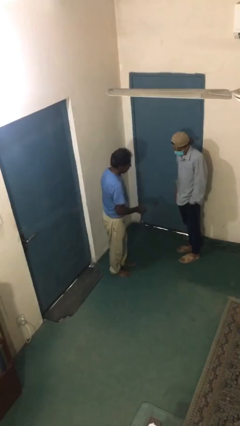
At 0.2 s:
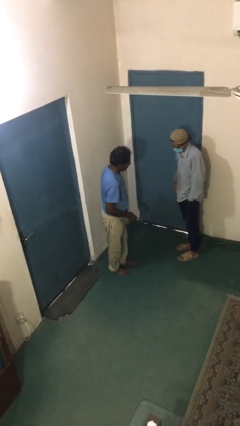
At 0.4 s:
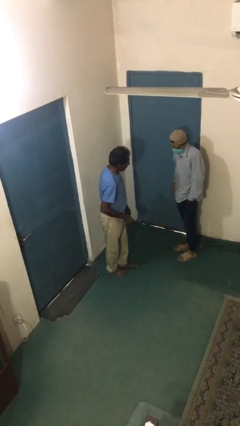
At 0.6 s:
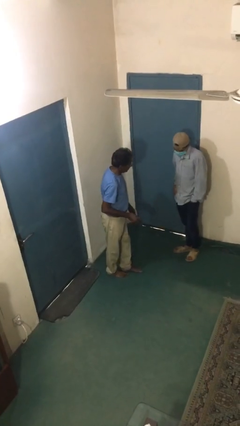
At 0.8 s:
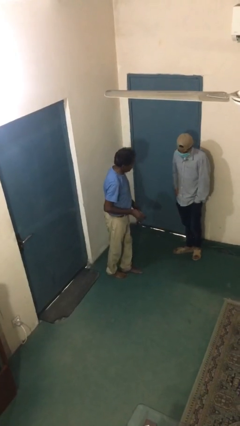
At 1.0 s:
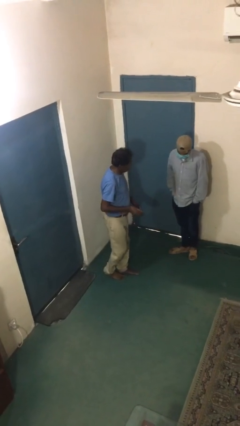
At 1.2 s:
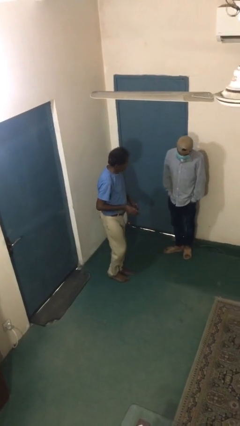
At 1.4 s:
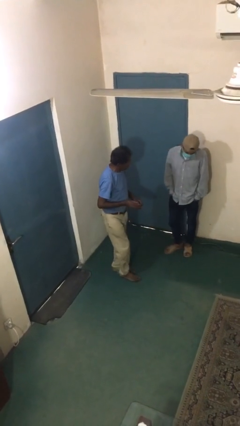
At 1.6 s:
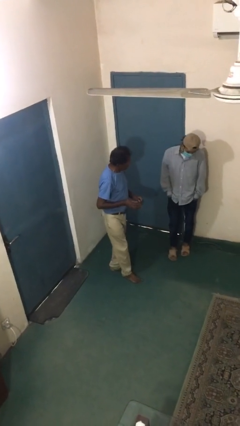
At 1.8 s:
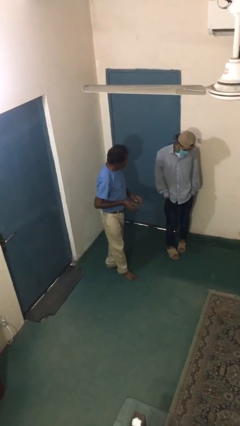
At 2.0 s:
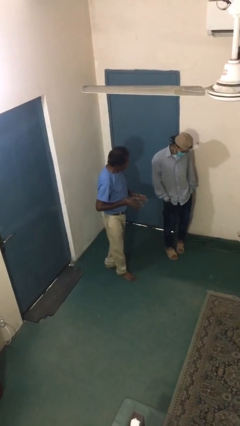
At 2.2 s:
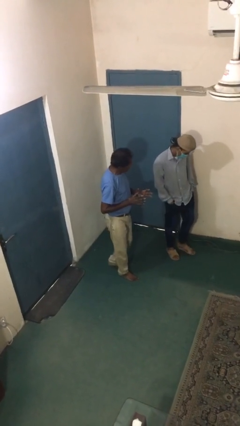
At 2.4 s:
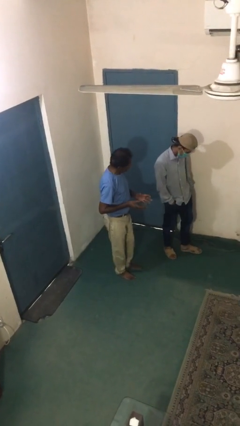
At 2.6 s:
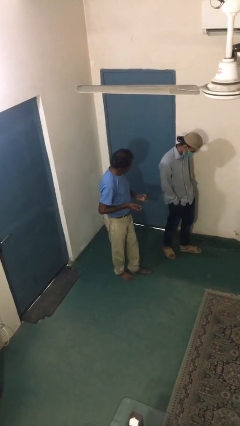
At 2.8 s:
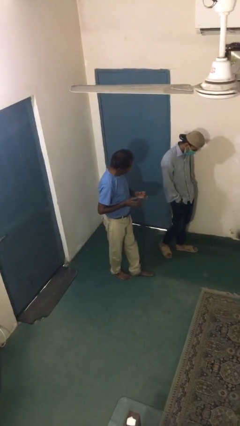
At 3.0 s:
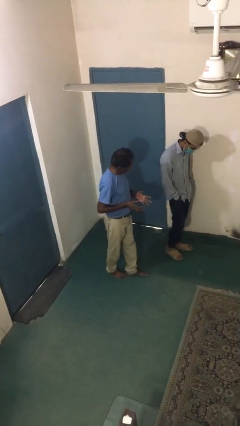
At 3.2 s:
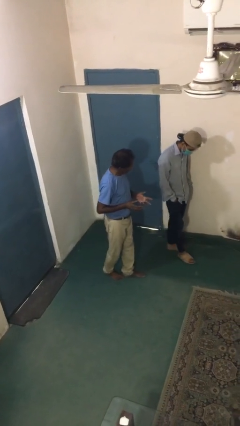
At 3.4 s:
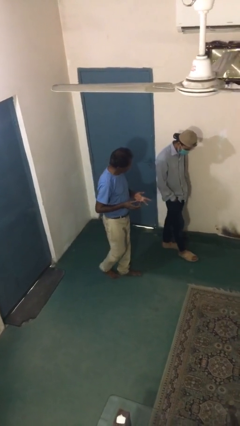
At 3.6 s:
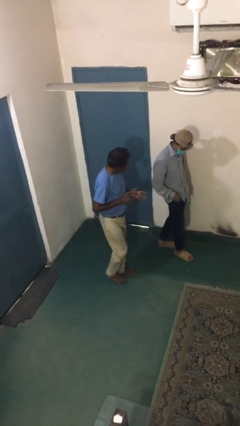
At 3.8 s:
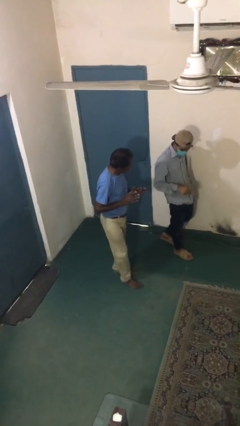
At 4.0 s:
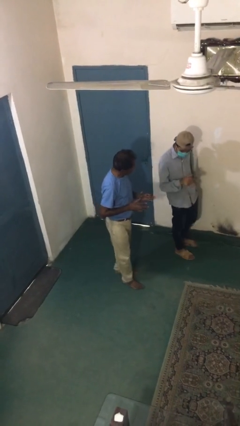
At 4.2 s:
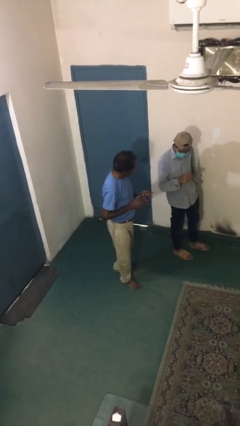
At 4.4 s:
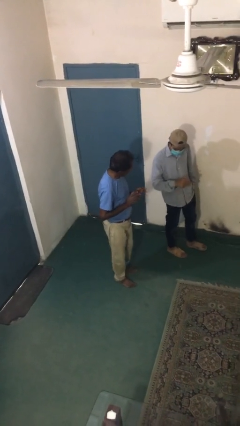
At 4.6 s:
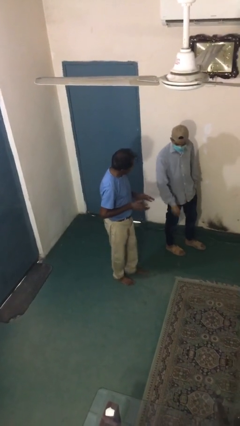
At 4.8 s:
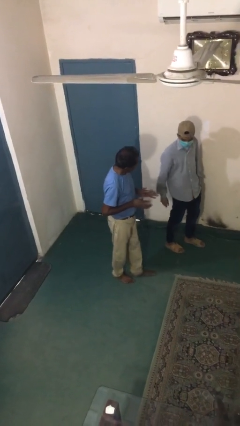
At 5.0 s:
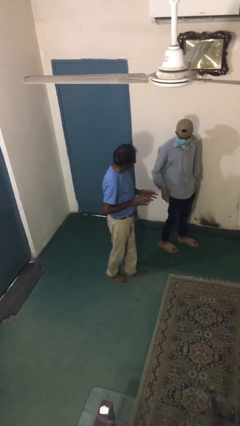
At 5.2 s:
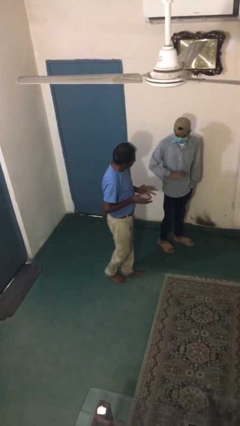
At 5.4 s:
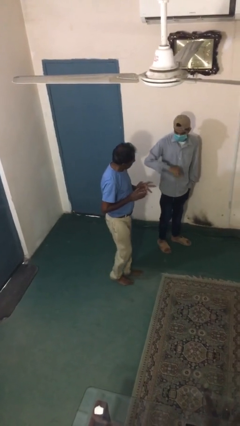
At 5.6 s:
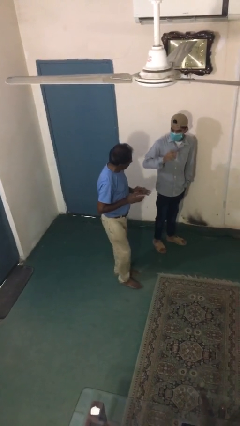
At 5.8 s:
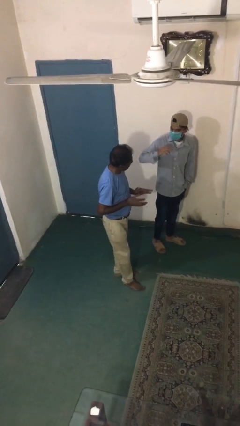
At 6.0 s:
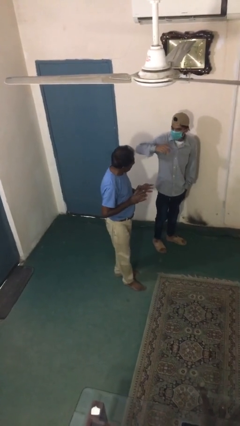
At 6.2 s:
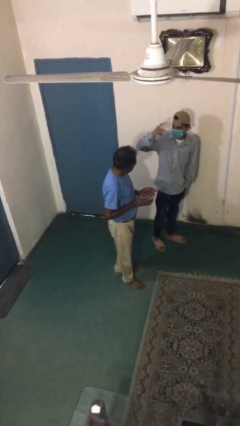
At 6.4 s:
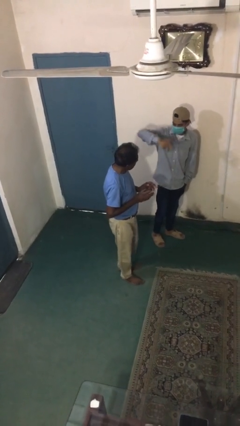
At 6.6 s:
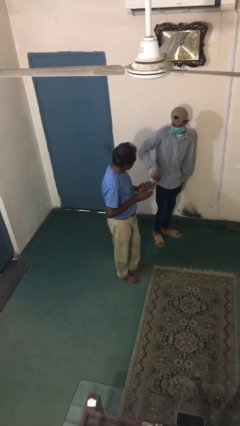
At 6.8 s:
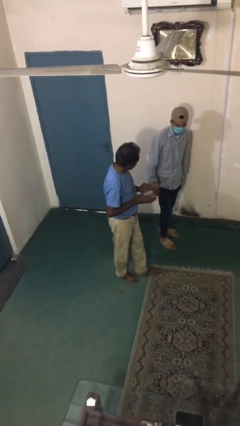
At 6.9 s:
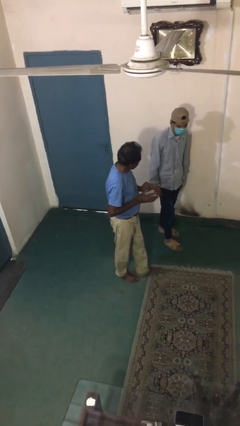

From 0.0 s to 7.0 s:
person talks to person

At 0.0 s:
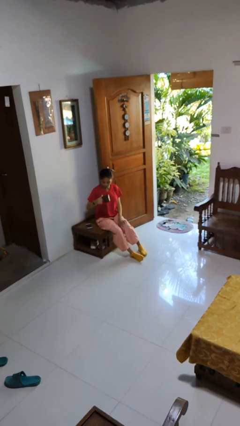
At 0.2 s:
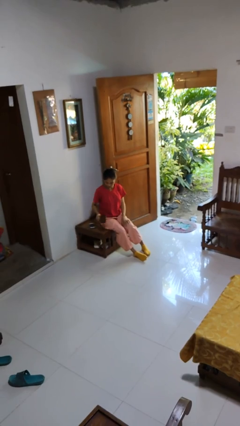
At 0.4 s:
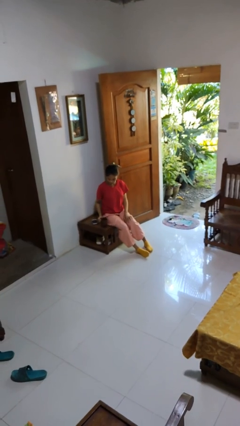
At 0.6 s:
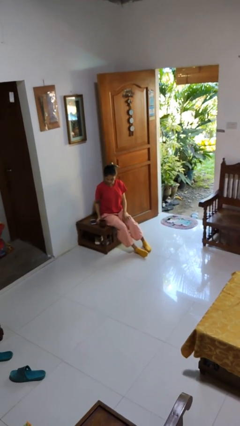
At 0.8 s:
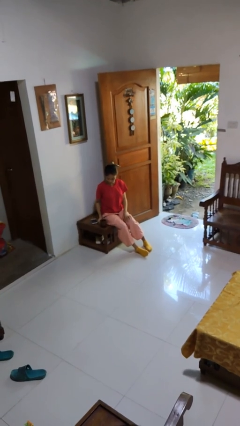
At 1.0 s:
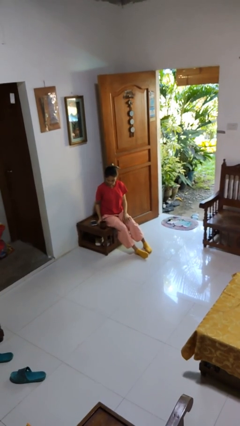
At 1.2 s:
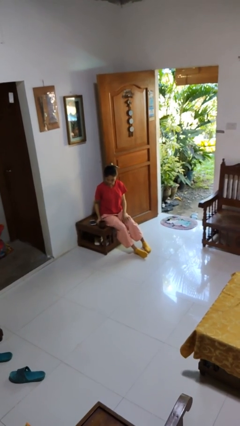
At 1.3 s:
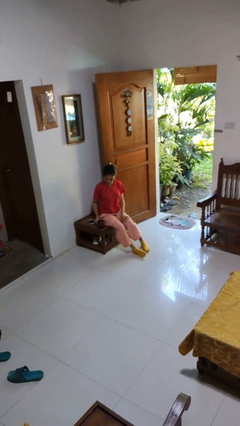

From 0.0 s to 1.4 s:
person puts down object on table

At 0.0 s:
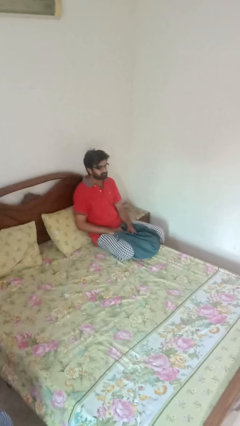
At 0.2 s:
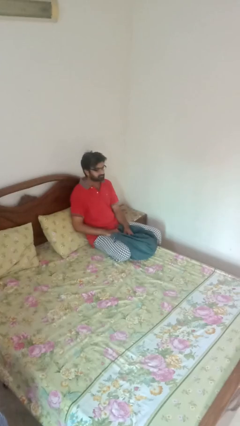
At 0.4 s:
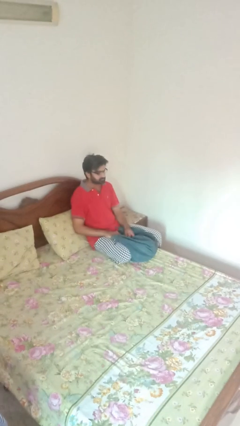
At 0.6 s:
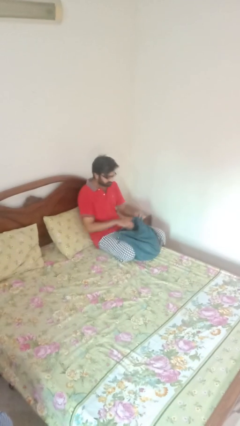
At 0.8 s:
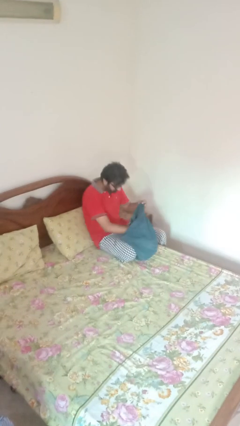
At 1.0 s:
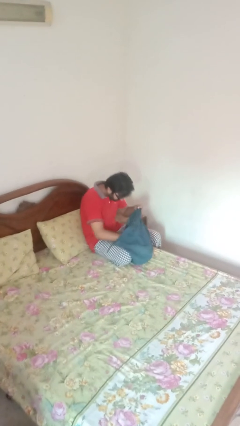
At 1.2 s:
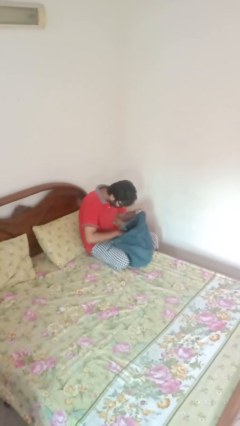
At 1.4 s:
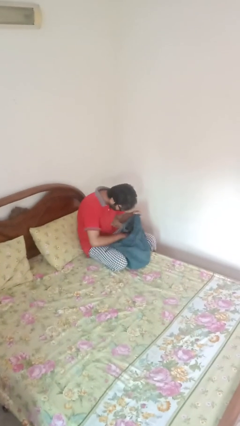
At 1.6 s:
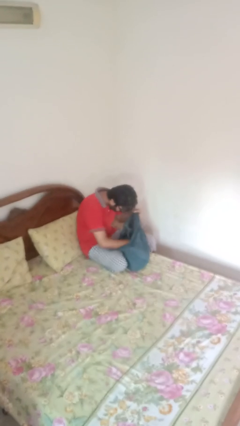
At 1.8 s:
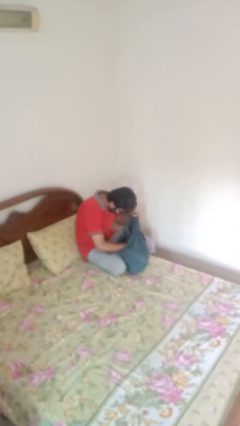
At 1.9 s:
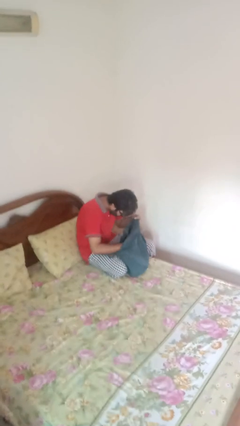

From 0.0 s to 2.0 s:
person searches in bag

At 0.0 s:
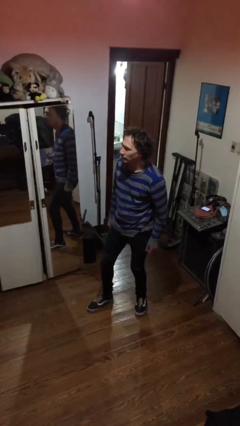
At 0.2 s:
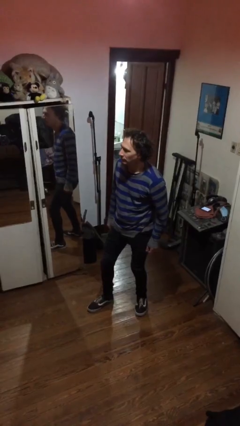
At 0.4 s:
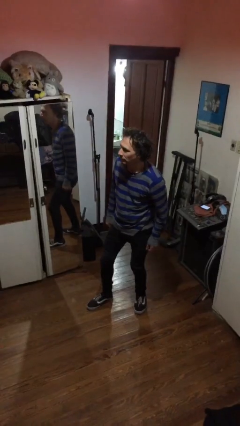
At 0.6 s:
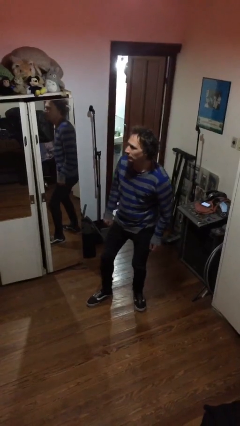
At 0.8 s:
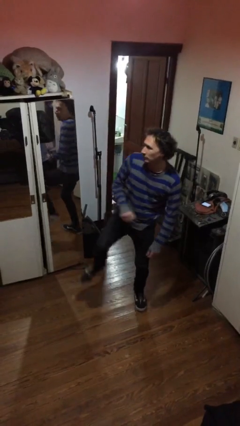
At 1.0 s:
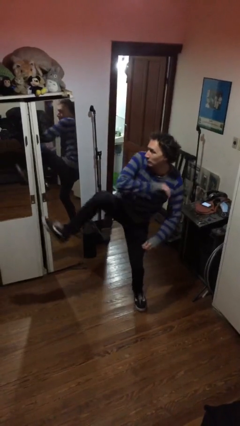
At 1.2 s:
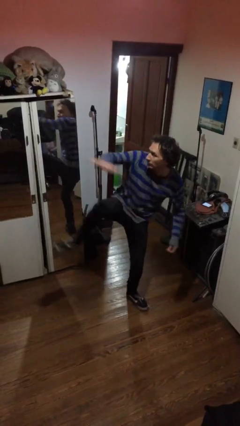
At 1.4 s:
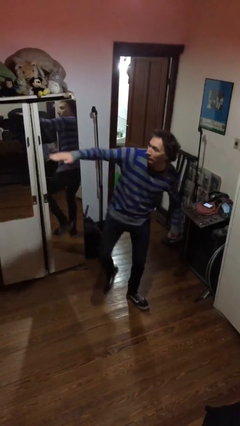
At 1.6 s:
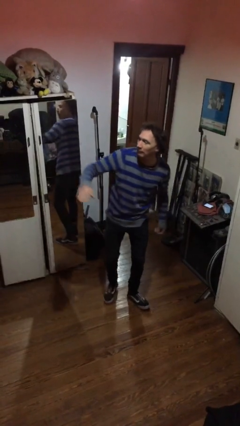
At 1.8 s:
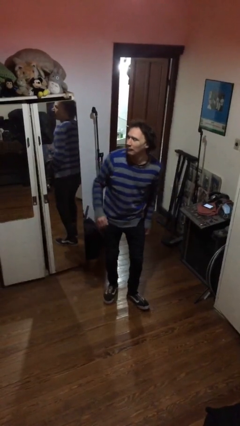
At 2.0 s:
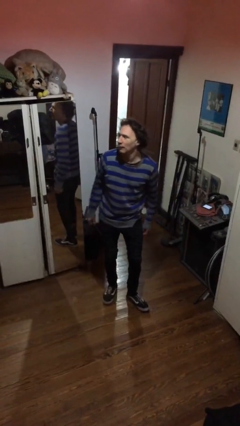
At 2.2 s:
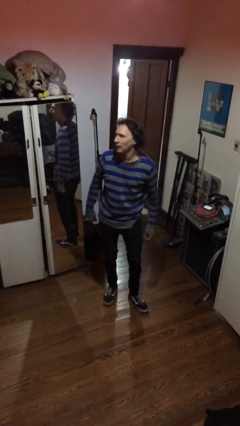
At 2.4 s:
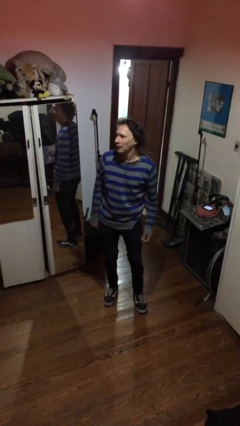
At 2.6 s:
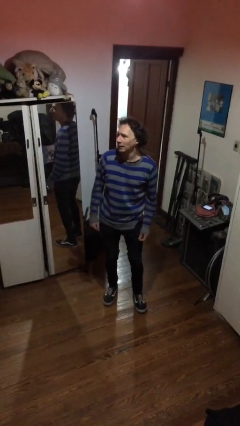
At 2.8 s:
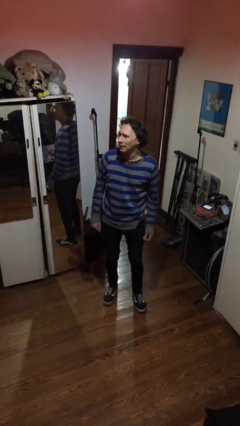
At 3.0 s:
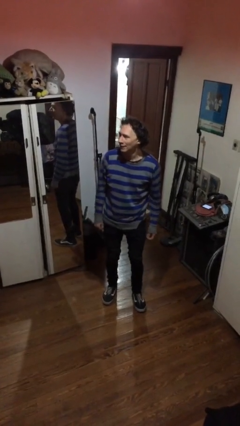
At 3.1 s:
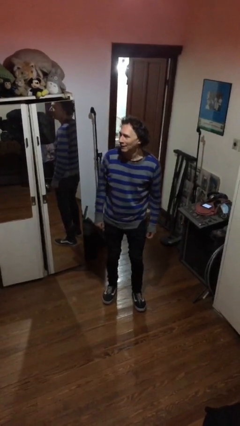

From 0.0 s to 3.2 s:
person karate chop

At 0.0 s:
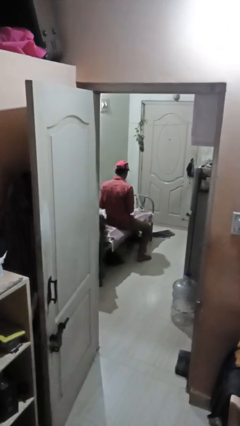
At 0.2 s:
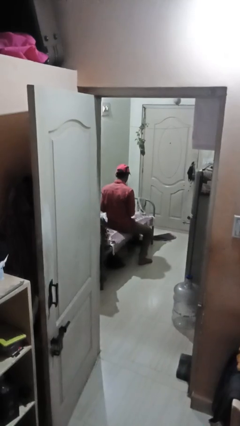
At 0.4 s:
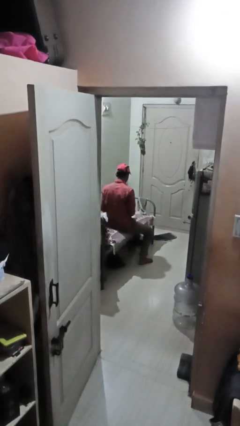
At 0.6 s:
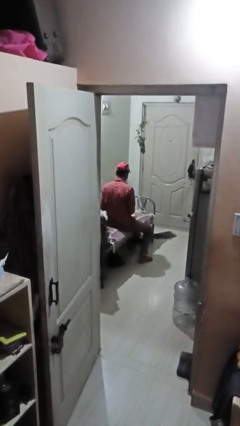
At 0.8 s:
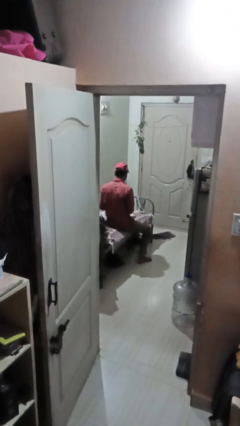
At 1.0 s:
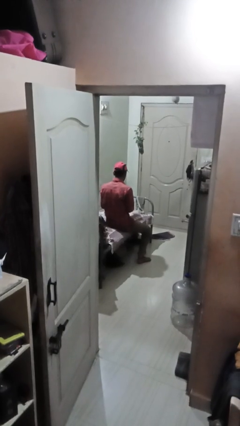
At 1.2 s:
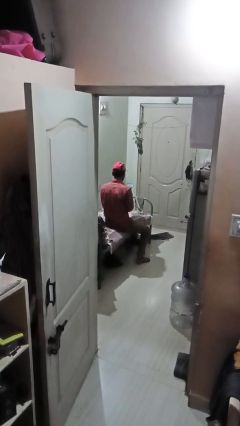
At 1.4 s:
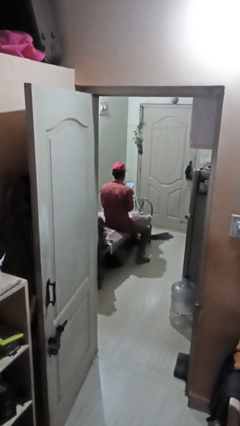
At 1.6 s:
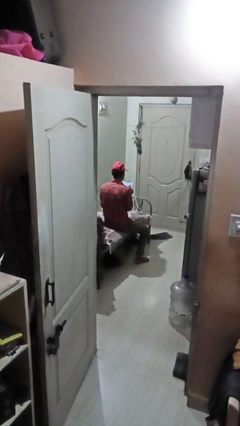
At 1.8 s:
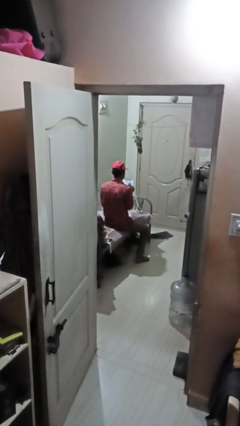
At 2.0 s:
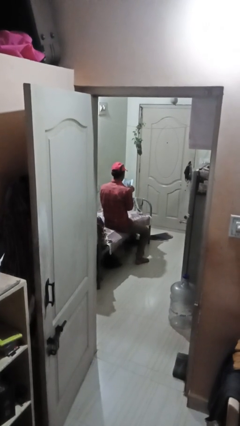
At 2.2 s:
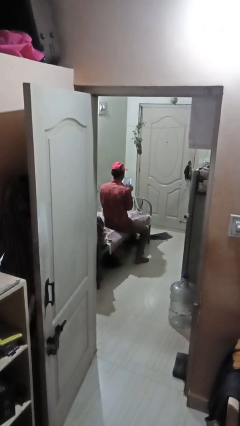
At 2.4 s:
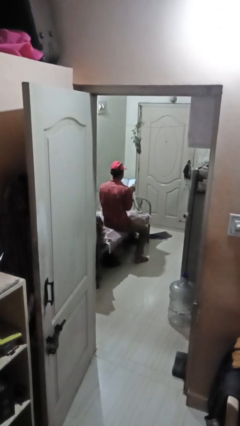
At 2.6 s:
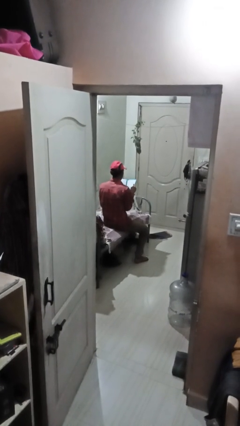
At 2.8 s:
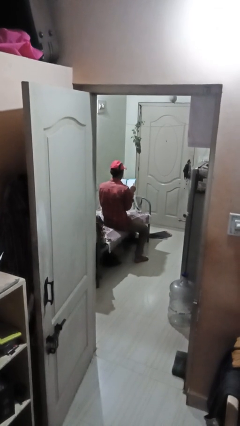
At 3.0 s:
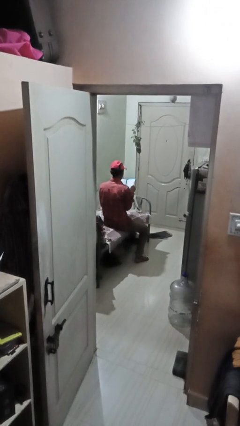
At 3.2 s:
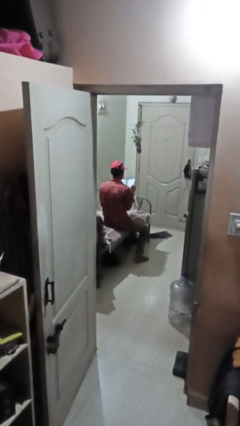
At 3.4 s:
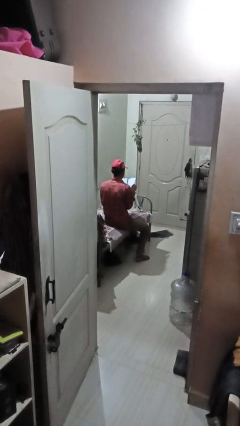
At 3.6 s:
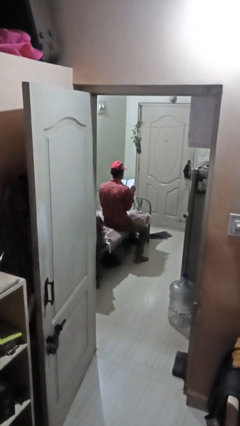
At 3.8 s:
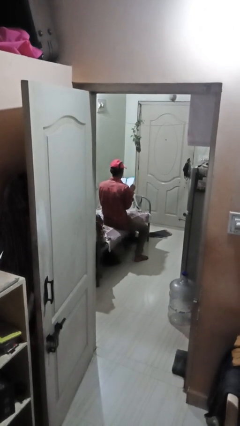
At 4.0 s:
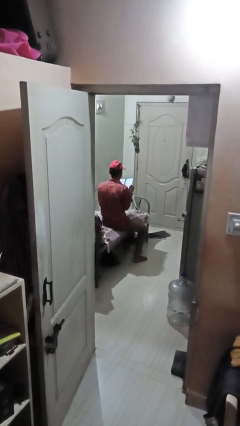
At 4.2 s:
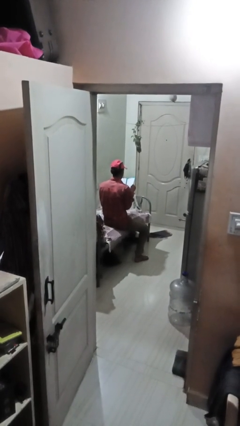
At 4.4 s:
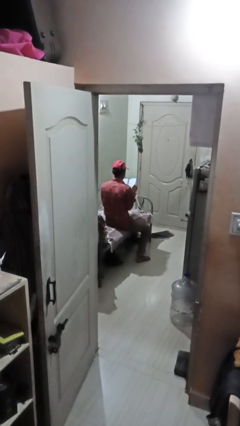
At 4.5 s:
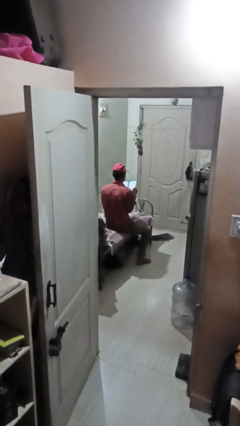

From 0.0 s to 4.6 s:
person reads magazine
